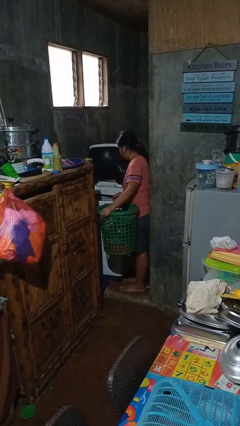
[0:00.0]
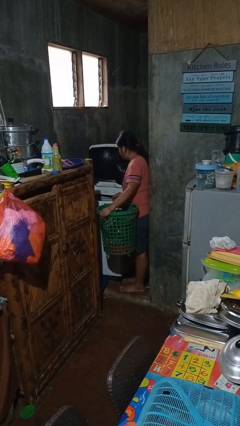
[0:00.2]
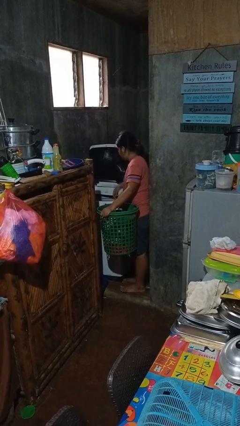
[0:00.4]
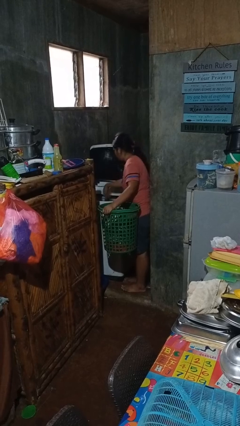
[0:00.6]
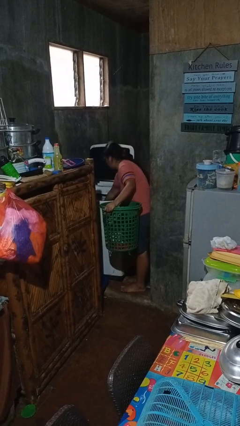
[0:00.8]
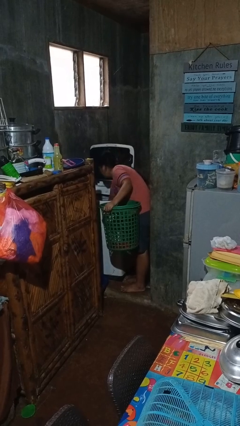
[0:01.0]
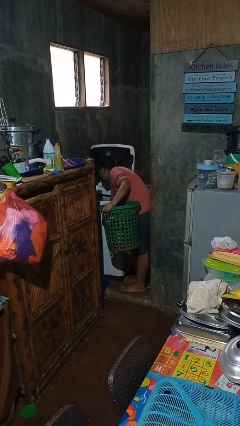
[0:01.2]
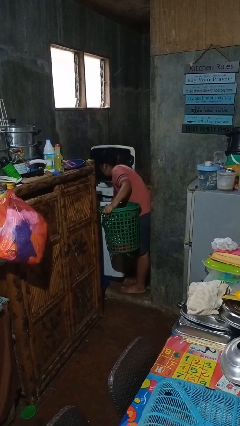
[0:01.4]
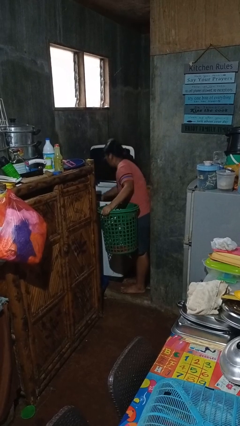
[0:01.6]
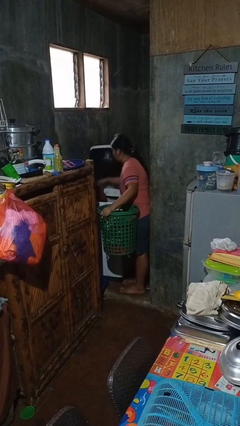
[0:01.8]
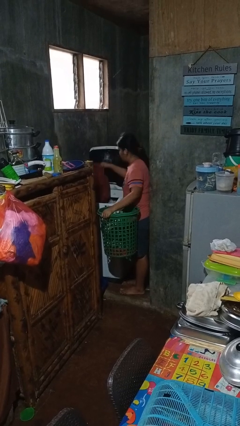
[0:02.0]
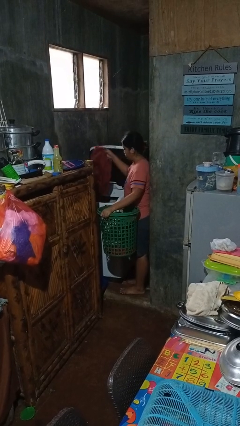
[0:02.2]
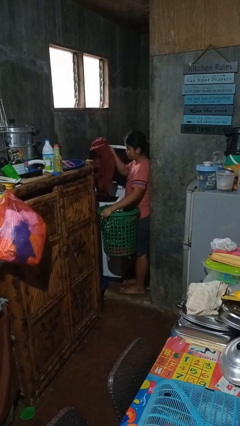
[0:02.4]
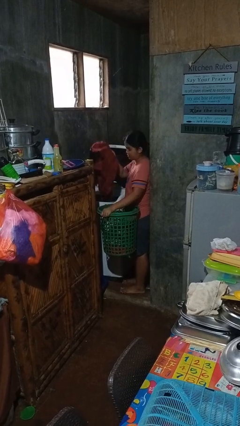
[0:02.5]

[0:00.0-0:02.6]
person unloads clotheswasher

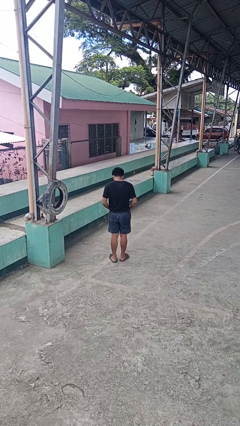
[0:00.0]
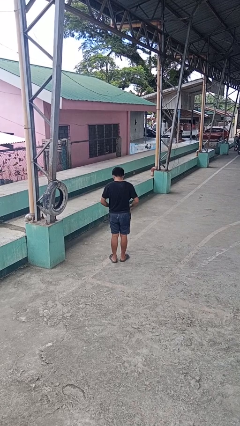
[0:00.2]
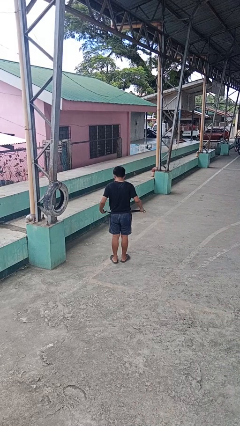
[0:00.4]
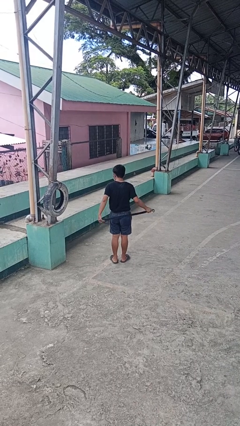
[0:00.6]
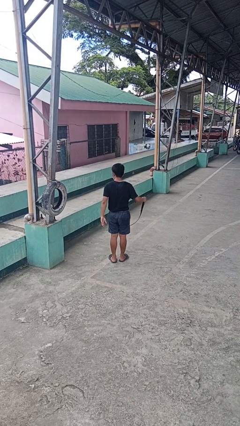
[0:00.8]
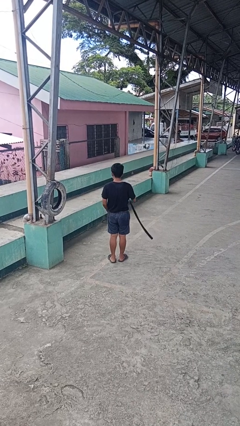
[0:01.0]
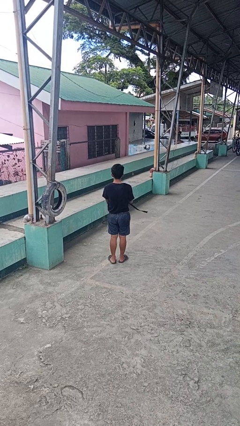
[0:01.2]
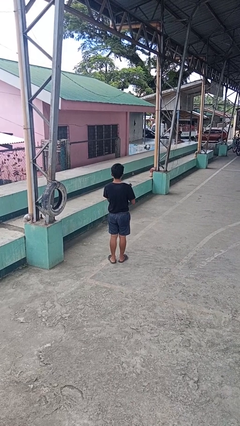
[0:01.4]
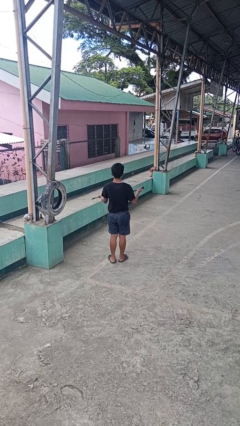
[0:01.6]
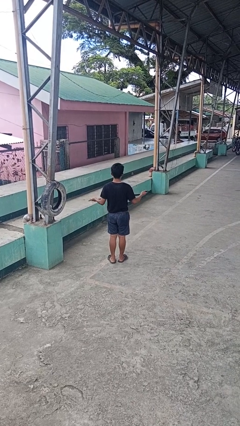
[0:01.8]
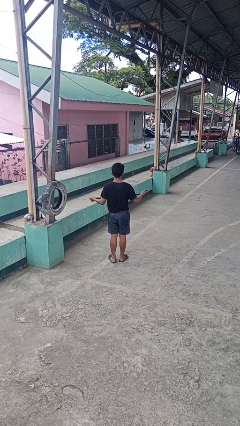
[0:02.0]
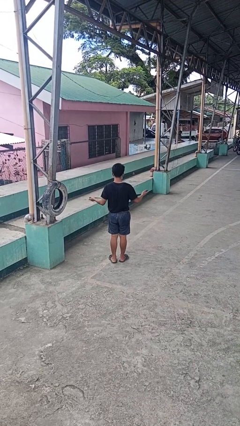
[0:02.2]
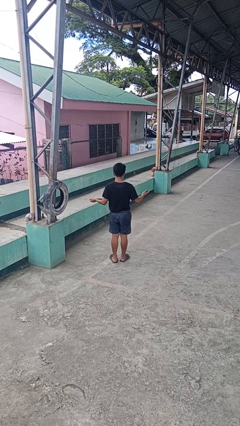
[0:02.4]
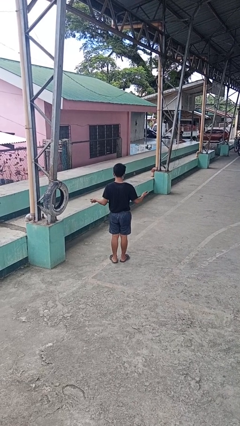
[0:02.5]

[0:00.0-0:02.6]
person takes off belt

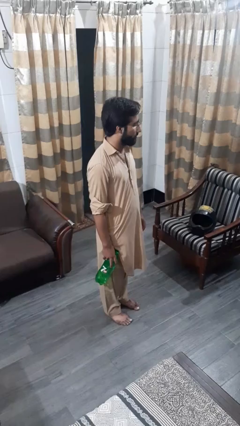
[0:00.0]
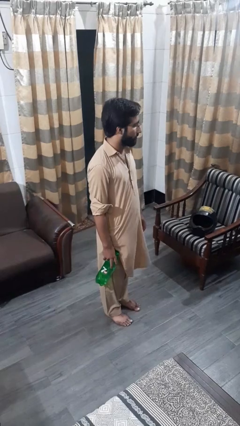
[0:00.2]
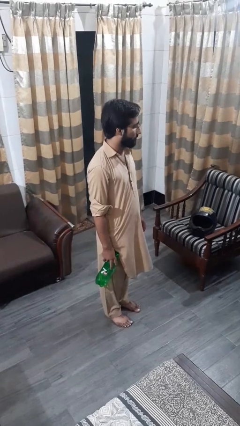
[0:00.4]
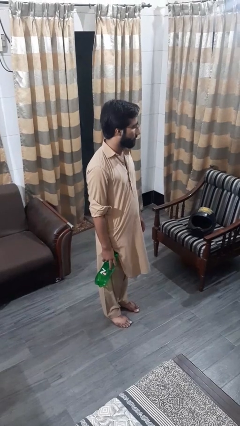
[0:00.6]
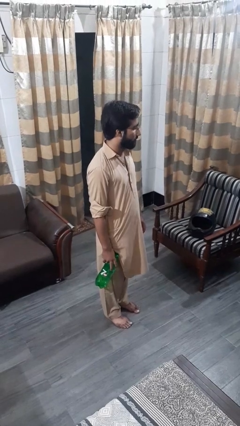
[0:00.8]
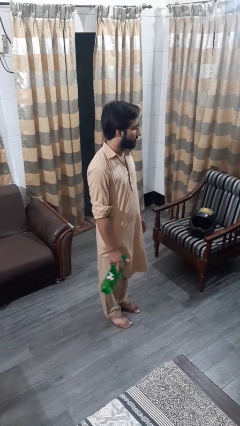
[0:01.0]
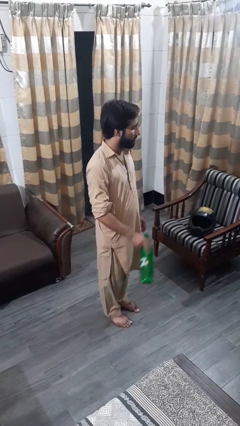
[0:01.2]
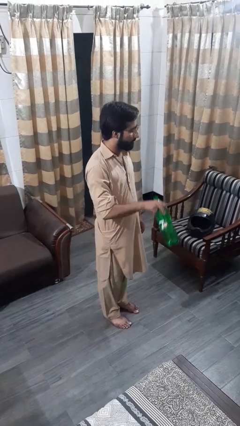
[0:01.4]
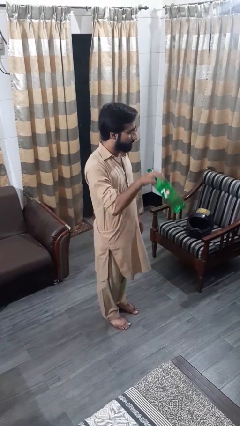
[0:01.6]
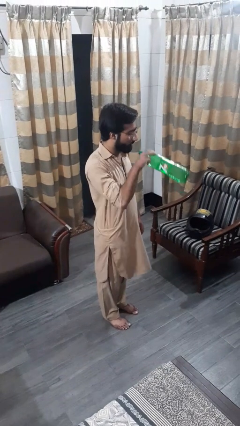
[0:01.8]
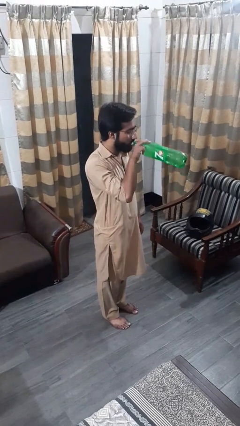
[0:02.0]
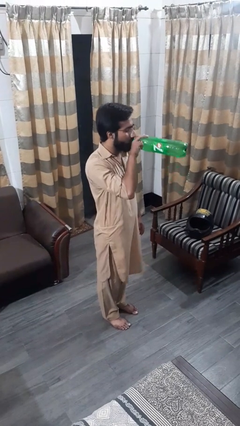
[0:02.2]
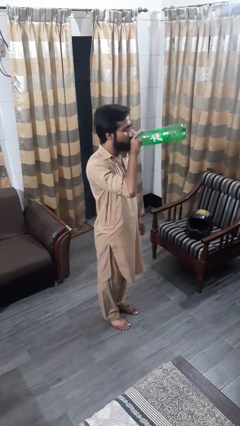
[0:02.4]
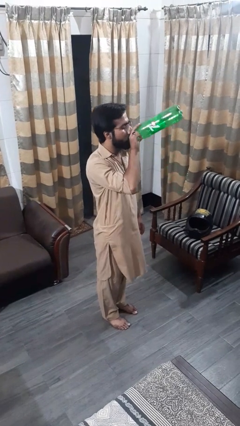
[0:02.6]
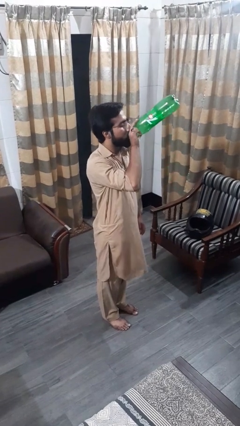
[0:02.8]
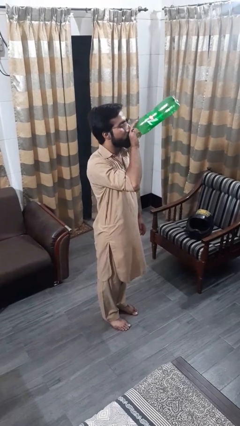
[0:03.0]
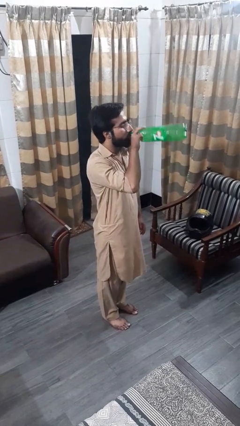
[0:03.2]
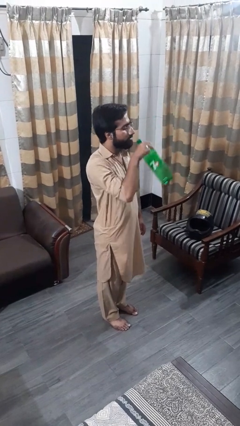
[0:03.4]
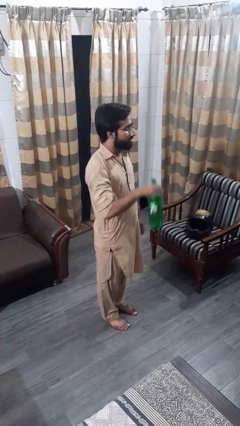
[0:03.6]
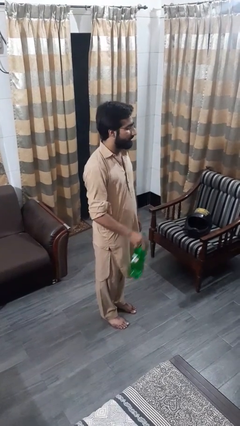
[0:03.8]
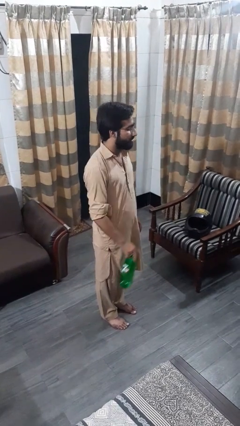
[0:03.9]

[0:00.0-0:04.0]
person drinks from bottle

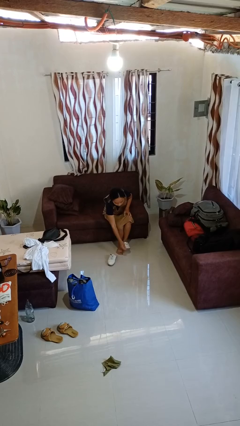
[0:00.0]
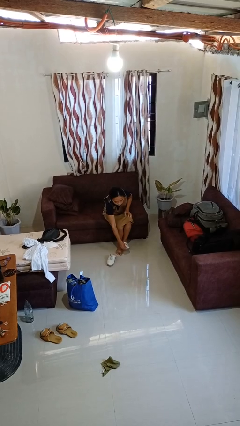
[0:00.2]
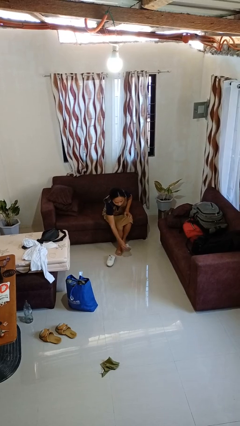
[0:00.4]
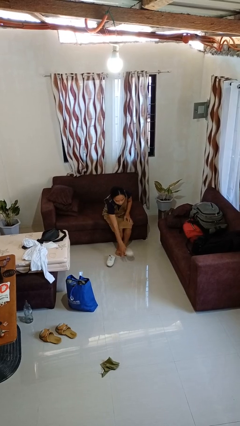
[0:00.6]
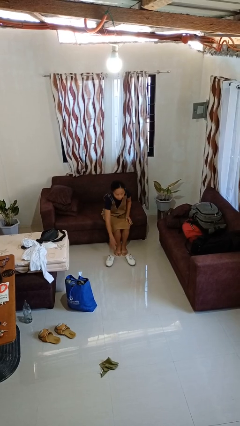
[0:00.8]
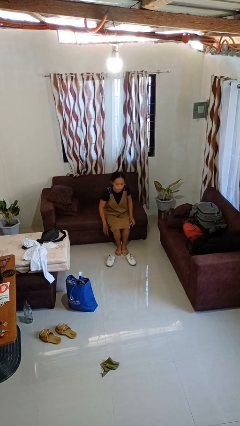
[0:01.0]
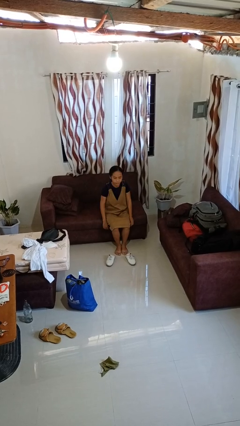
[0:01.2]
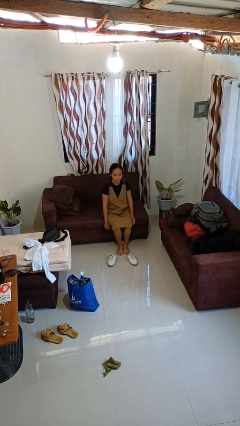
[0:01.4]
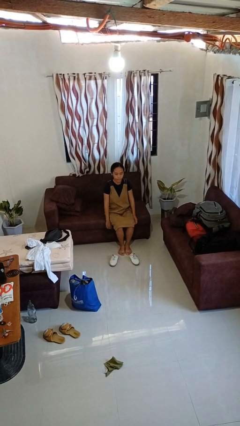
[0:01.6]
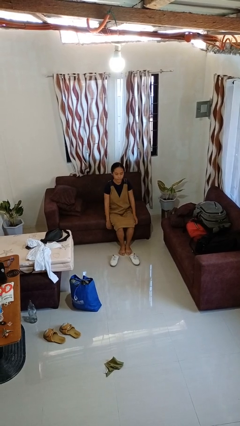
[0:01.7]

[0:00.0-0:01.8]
person takes off shoes

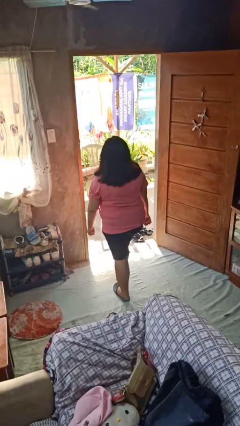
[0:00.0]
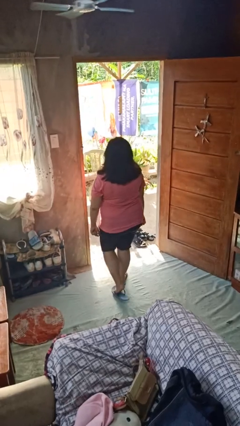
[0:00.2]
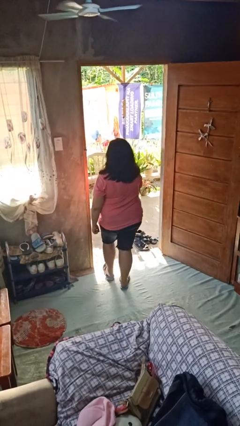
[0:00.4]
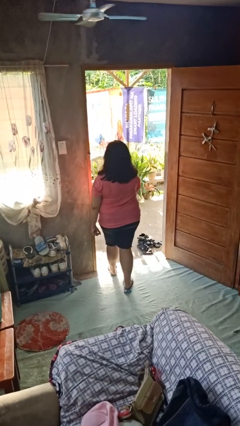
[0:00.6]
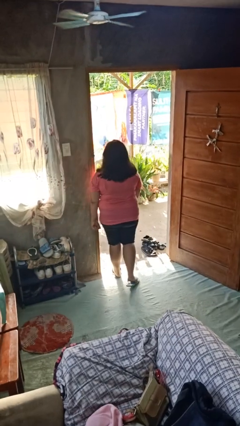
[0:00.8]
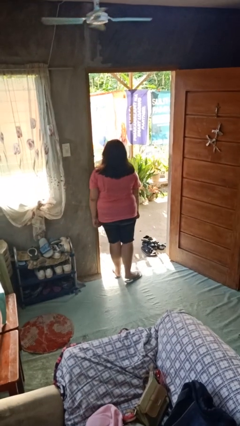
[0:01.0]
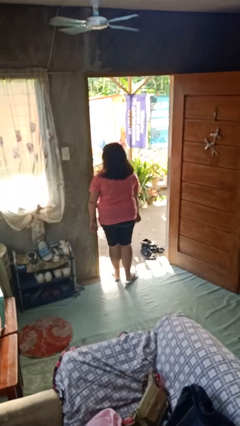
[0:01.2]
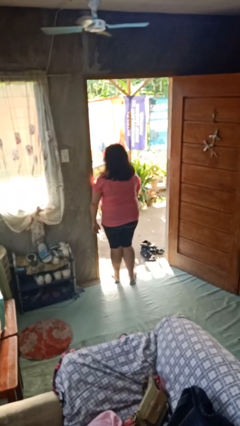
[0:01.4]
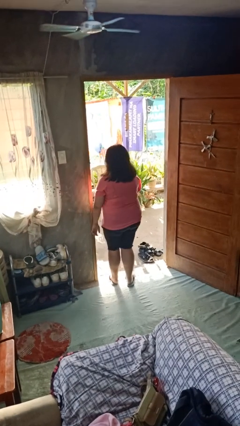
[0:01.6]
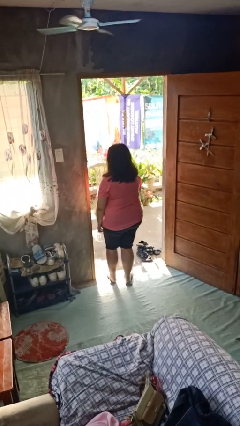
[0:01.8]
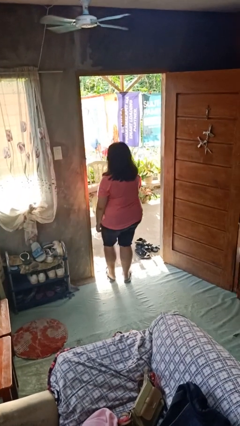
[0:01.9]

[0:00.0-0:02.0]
person bumps into wall

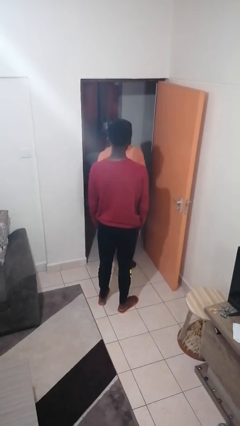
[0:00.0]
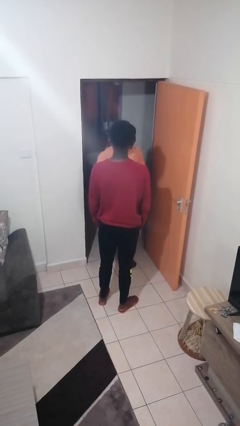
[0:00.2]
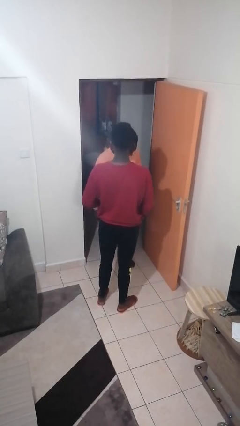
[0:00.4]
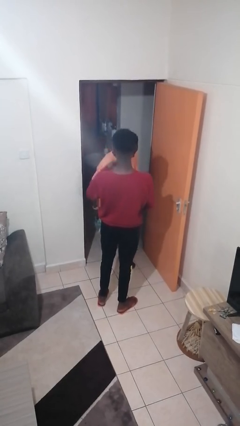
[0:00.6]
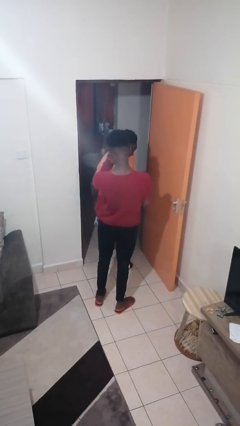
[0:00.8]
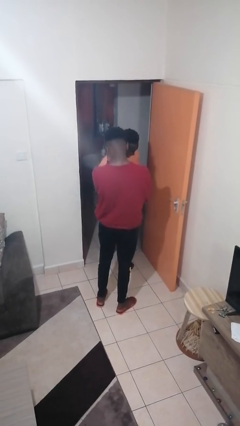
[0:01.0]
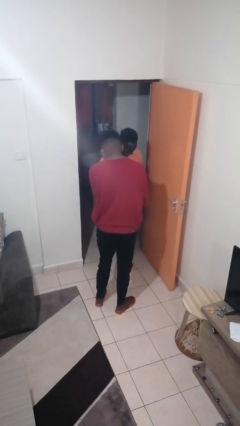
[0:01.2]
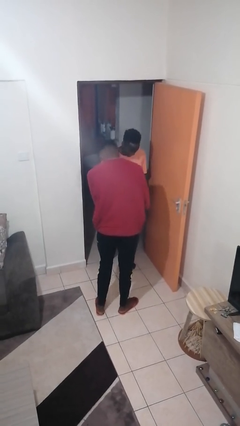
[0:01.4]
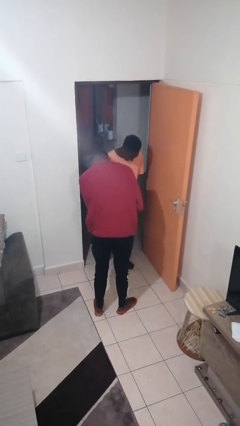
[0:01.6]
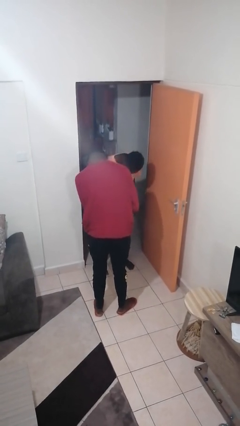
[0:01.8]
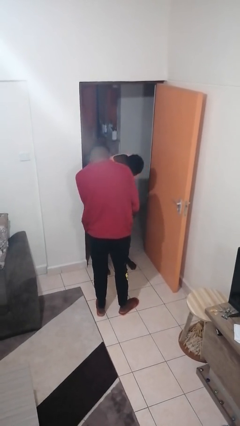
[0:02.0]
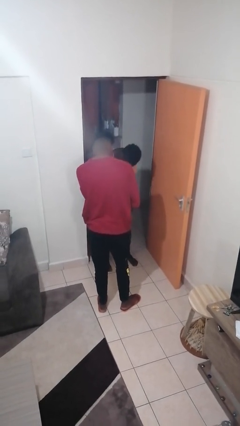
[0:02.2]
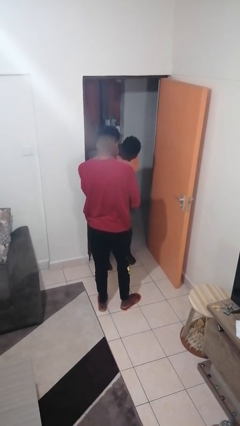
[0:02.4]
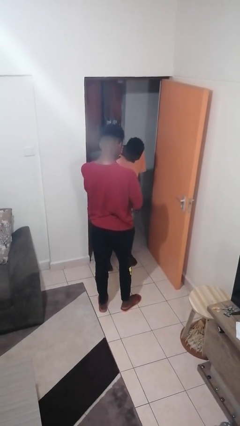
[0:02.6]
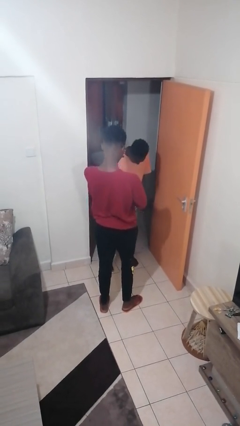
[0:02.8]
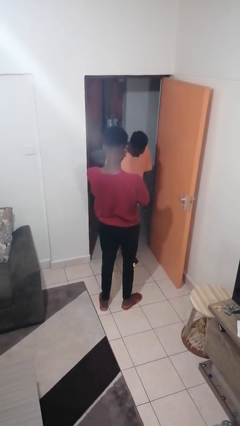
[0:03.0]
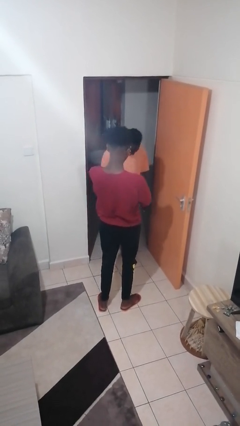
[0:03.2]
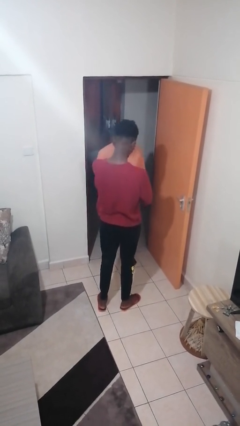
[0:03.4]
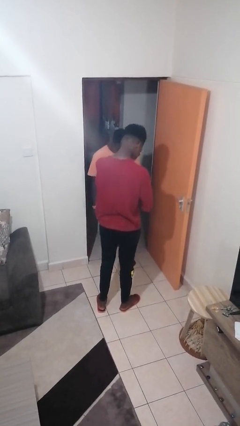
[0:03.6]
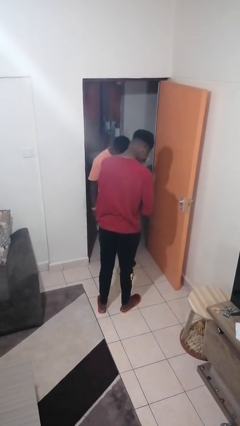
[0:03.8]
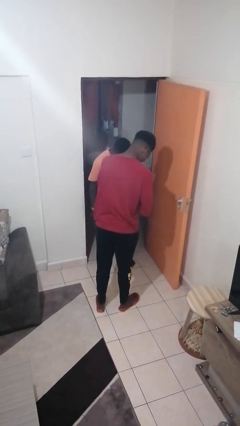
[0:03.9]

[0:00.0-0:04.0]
person laughs with person

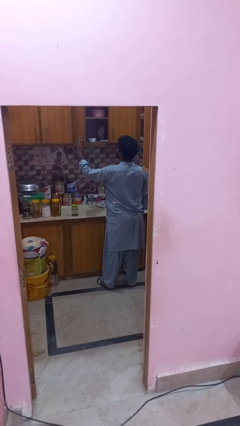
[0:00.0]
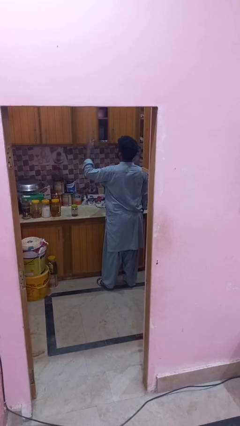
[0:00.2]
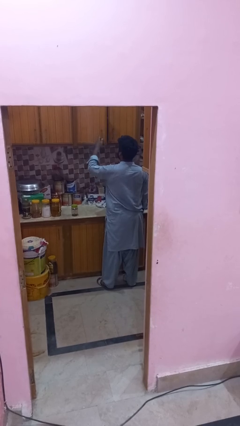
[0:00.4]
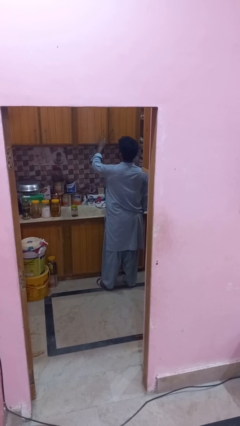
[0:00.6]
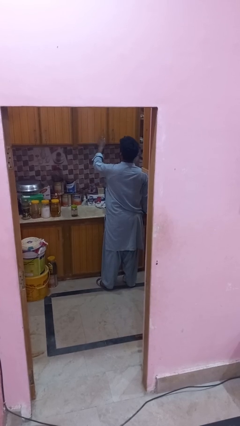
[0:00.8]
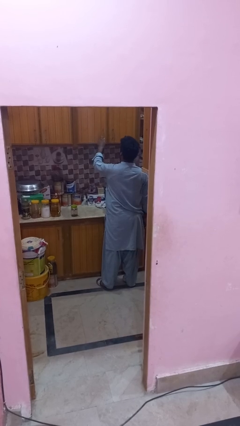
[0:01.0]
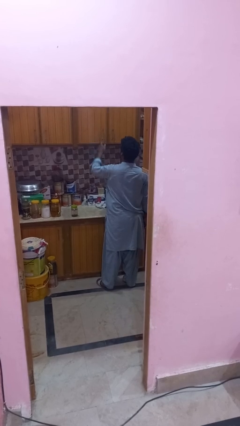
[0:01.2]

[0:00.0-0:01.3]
person closes cabinet
